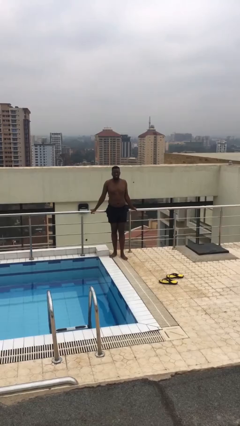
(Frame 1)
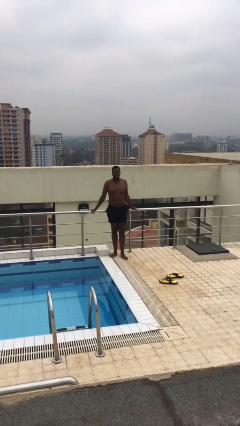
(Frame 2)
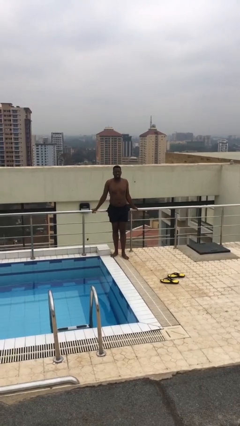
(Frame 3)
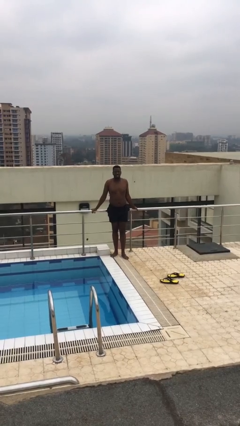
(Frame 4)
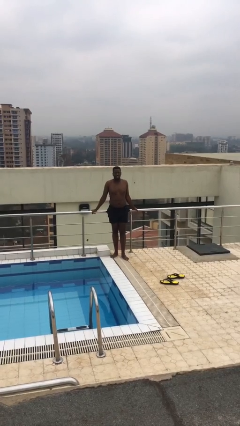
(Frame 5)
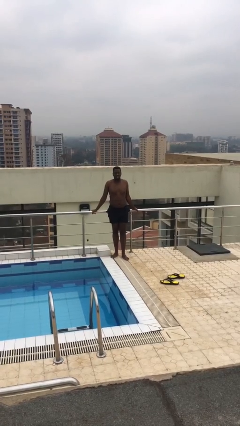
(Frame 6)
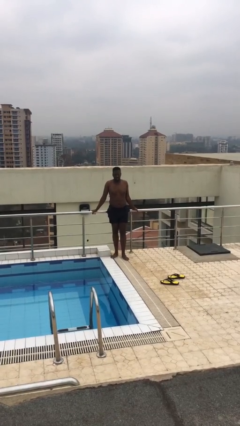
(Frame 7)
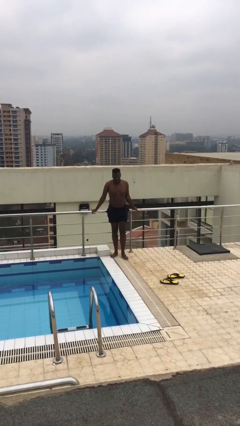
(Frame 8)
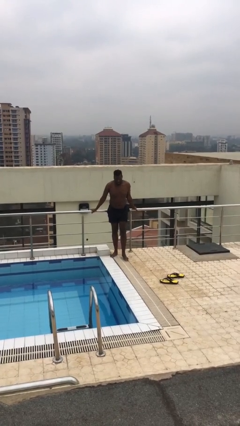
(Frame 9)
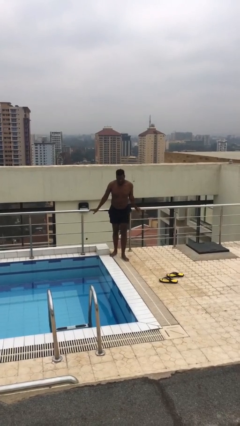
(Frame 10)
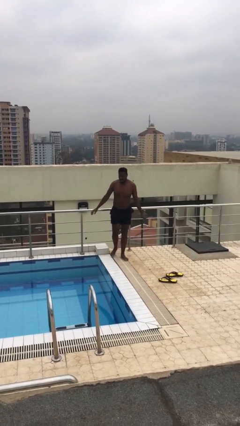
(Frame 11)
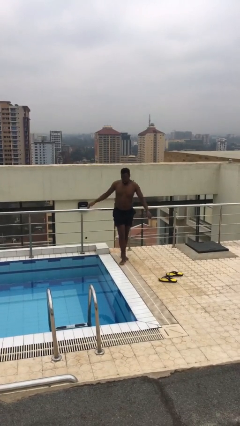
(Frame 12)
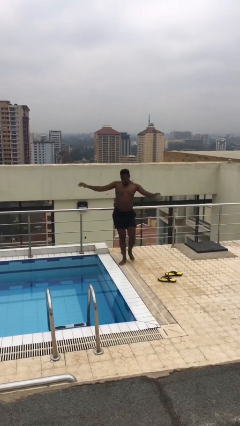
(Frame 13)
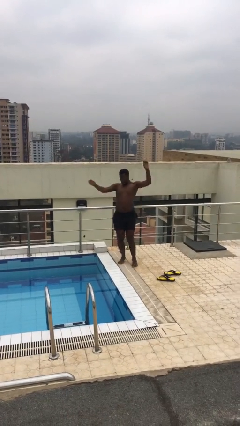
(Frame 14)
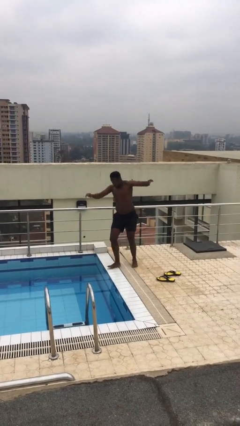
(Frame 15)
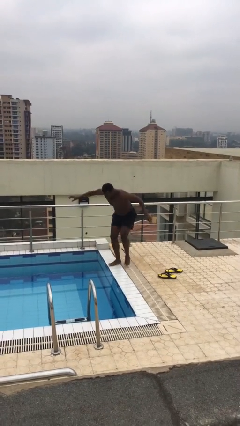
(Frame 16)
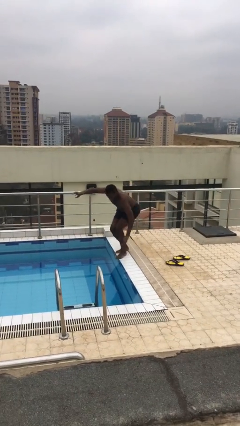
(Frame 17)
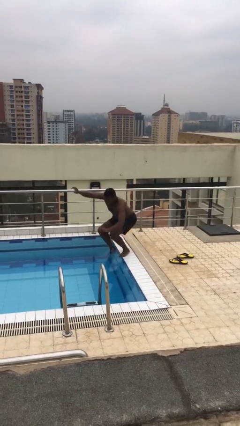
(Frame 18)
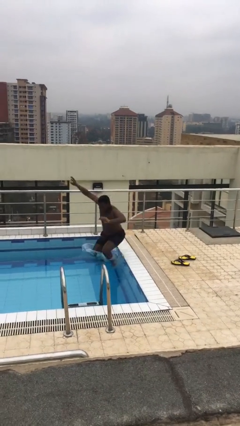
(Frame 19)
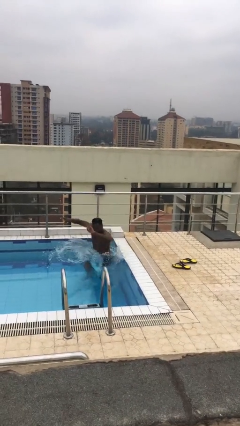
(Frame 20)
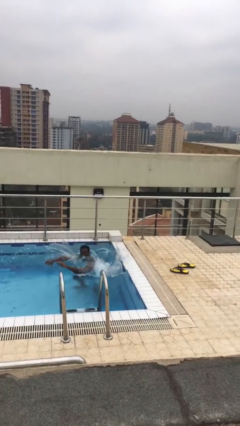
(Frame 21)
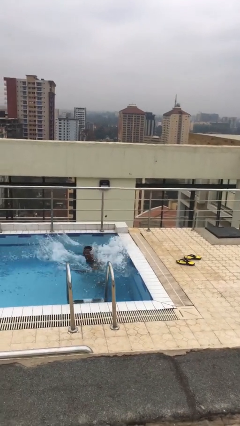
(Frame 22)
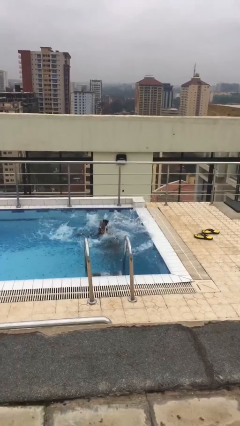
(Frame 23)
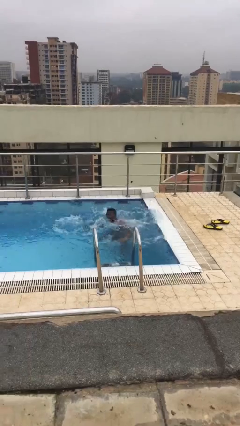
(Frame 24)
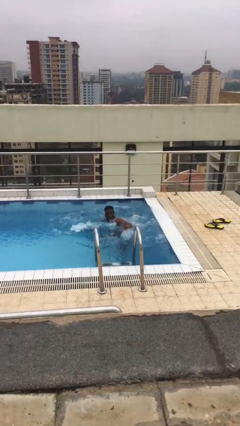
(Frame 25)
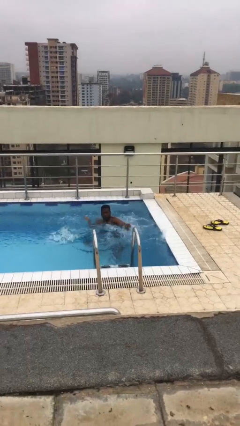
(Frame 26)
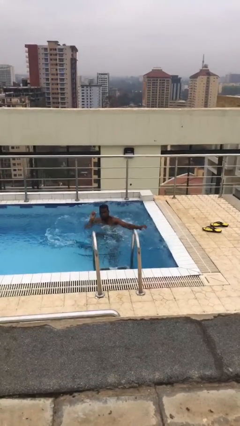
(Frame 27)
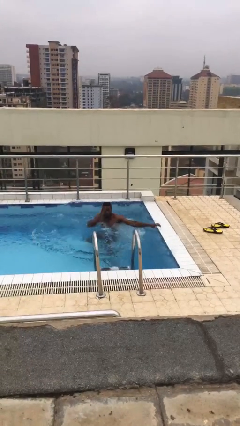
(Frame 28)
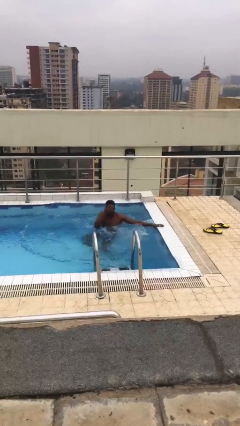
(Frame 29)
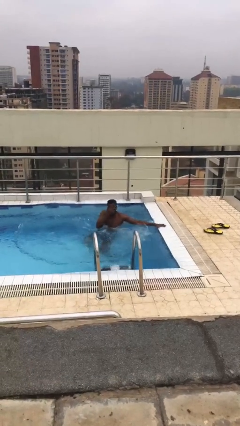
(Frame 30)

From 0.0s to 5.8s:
person falls into pool

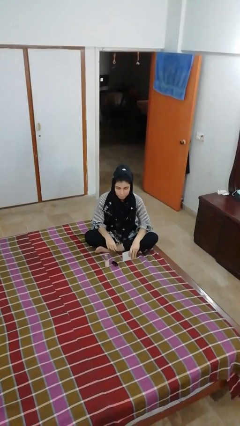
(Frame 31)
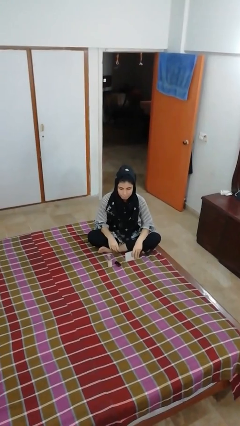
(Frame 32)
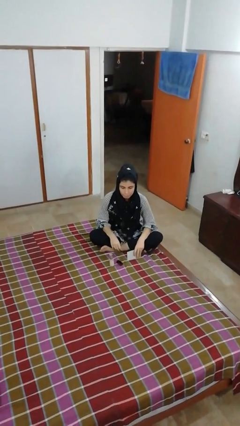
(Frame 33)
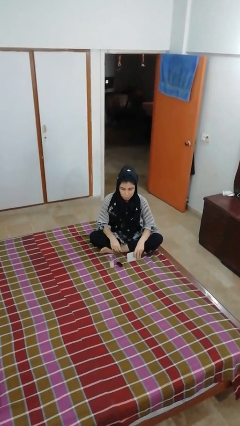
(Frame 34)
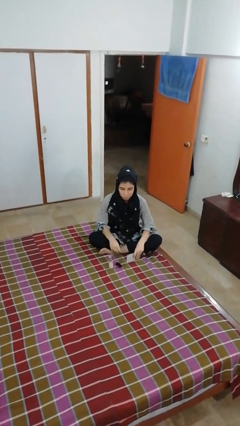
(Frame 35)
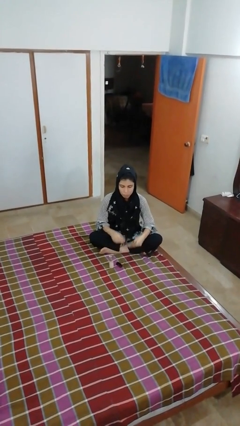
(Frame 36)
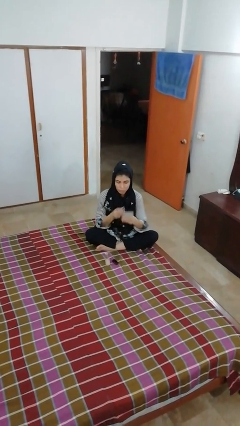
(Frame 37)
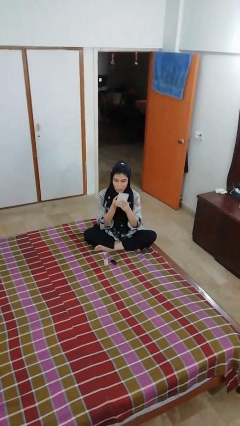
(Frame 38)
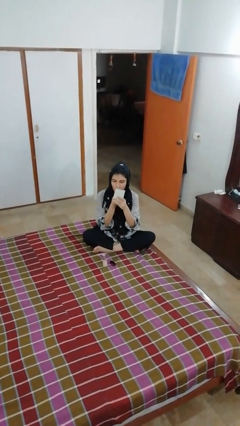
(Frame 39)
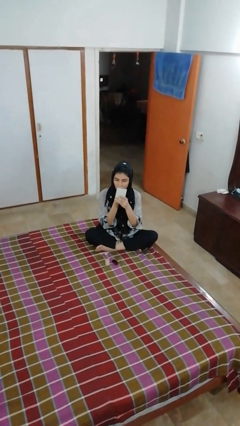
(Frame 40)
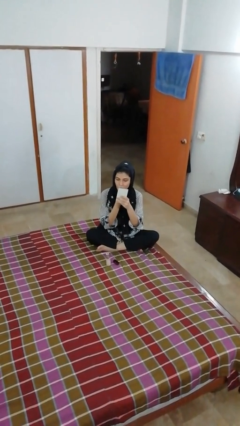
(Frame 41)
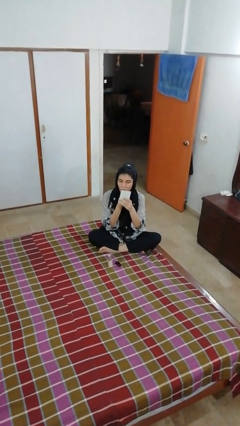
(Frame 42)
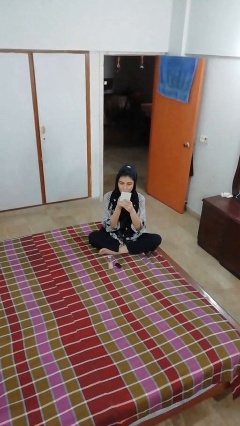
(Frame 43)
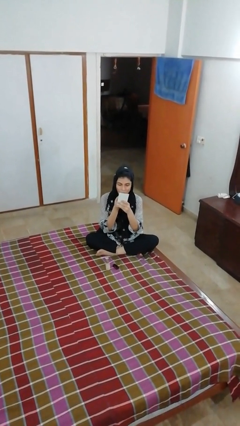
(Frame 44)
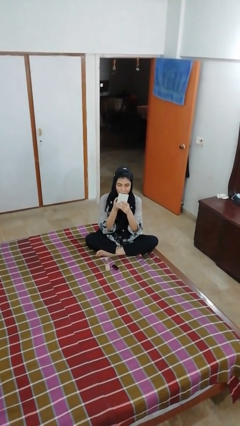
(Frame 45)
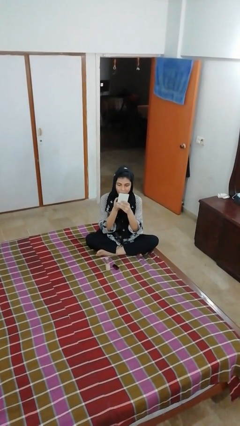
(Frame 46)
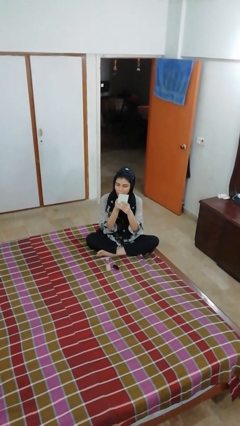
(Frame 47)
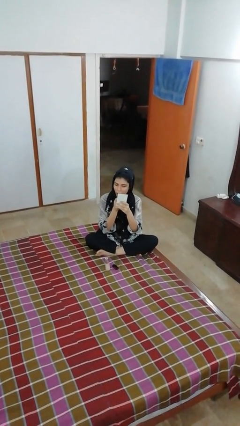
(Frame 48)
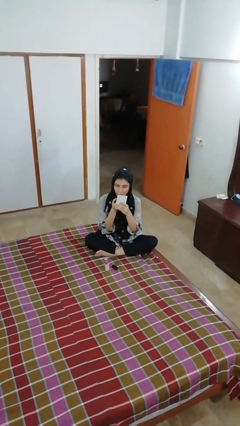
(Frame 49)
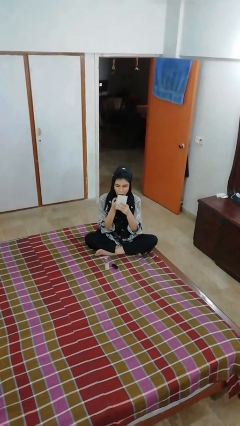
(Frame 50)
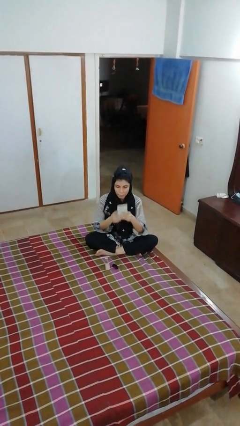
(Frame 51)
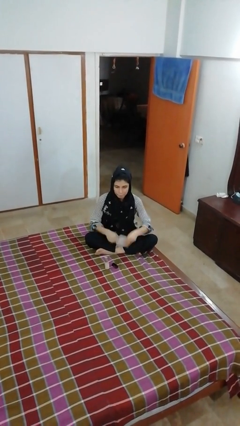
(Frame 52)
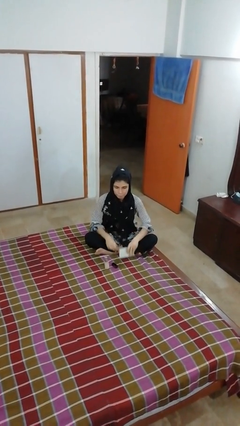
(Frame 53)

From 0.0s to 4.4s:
person applies lip makeup

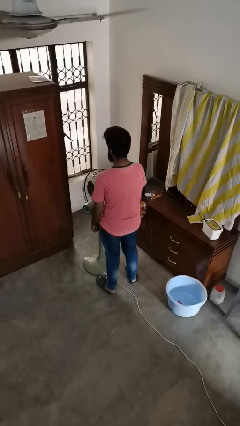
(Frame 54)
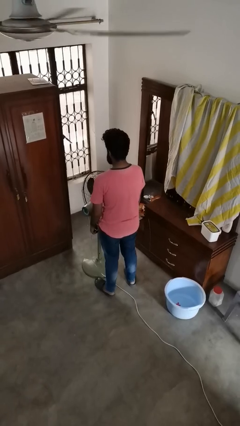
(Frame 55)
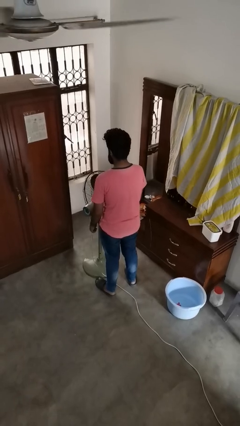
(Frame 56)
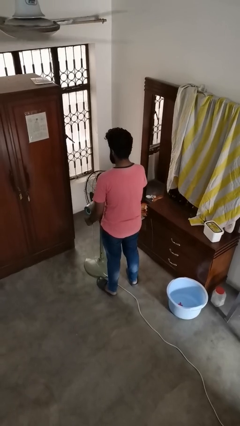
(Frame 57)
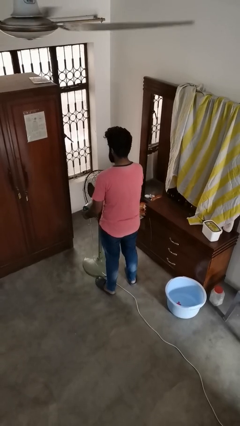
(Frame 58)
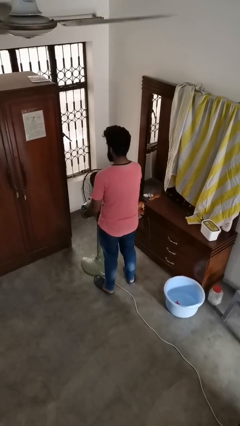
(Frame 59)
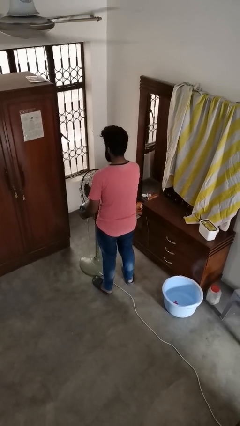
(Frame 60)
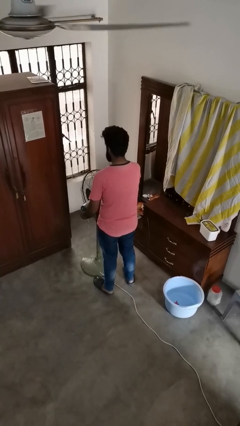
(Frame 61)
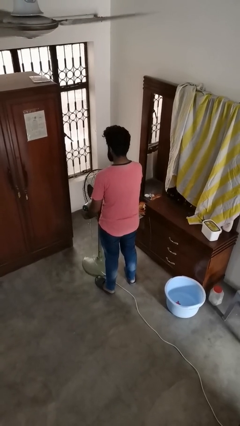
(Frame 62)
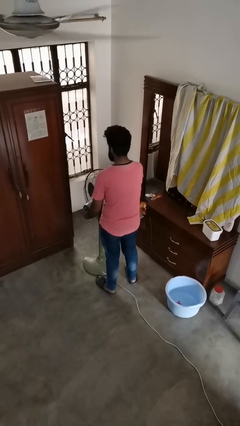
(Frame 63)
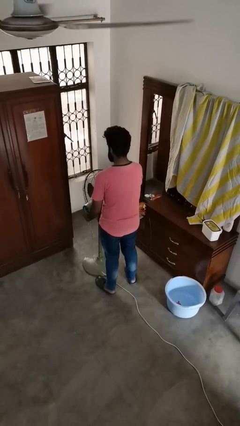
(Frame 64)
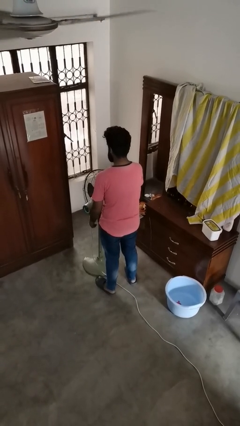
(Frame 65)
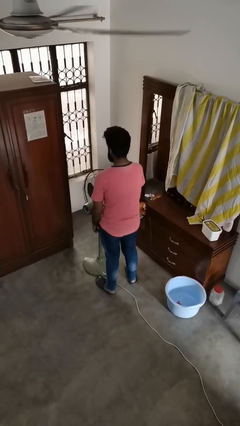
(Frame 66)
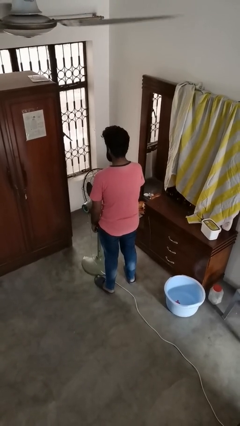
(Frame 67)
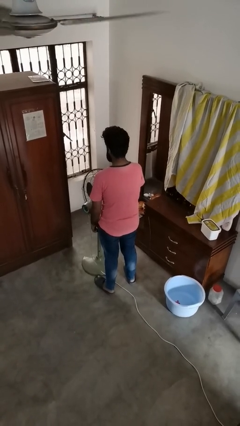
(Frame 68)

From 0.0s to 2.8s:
person turns off fan

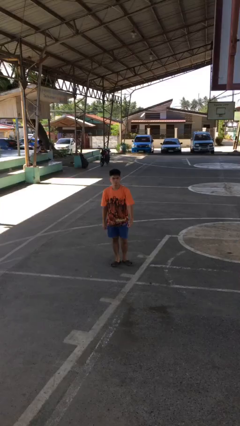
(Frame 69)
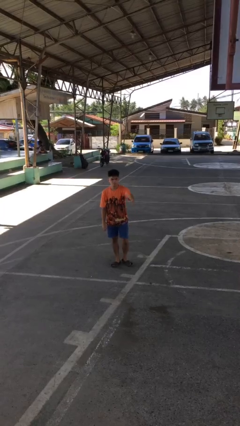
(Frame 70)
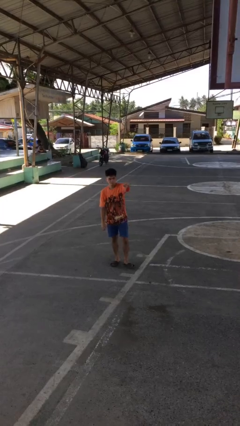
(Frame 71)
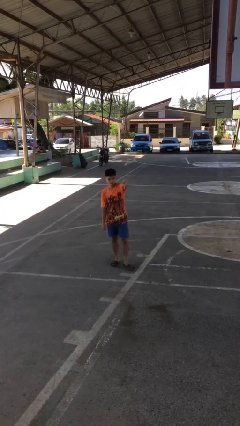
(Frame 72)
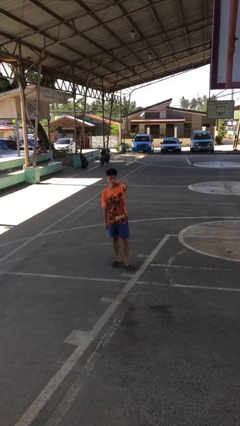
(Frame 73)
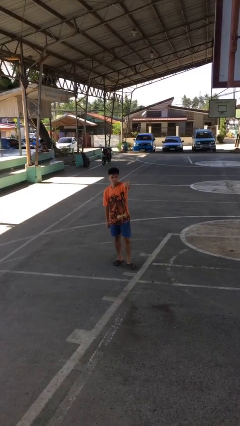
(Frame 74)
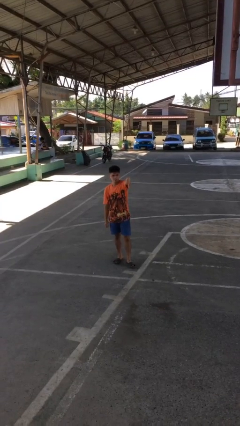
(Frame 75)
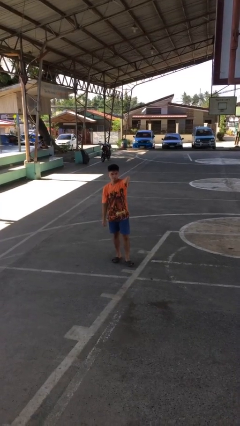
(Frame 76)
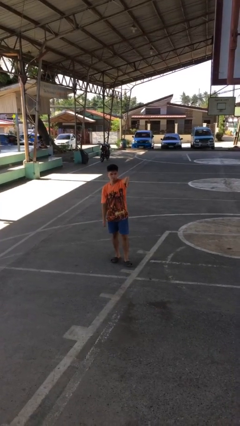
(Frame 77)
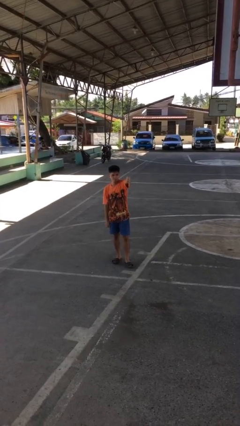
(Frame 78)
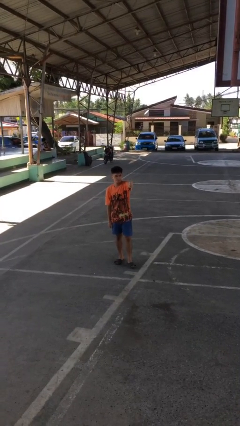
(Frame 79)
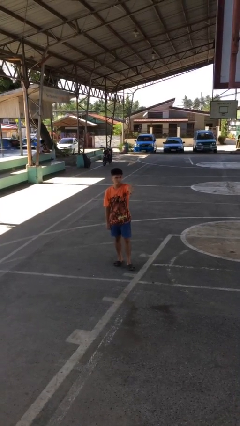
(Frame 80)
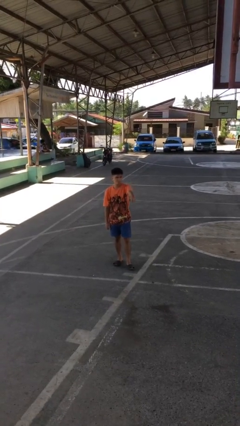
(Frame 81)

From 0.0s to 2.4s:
person gestures thumbs down

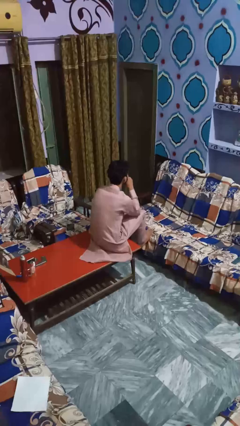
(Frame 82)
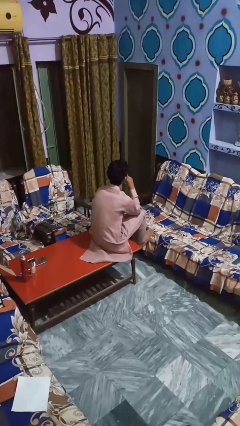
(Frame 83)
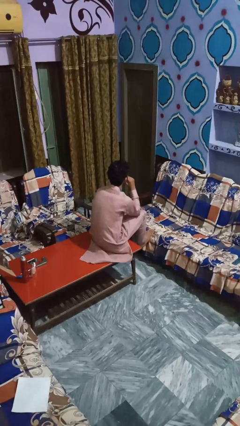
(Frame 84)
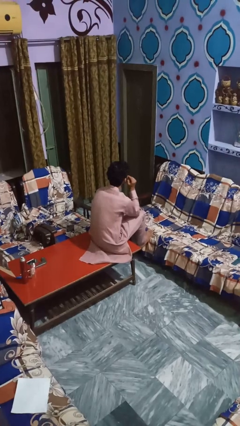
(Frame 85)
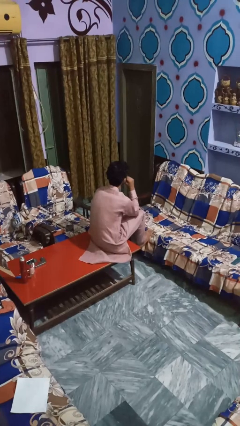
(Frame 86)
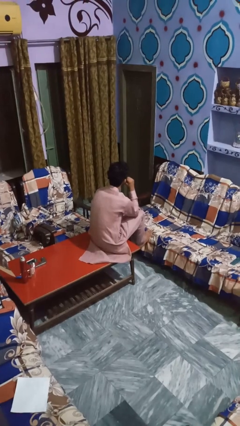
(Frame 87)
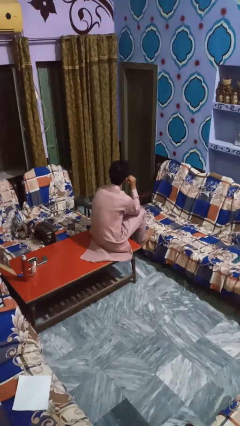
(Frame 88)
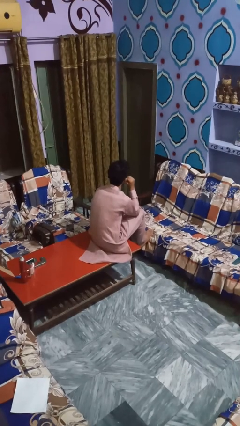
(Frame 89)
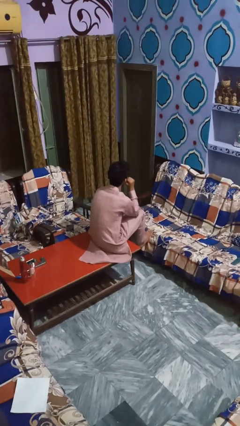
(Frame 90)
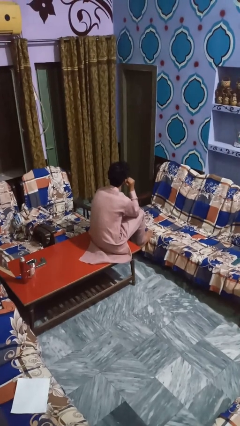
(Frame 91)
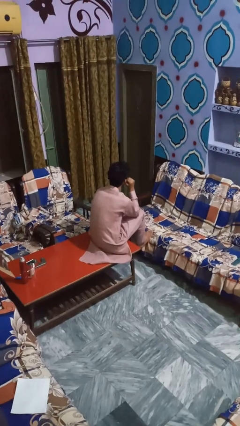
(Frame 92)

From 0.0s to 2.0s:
person licks fingers
